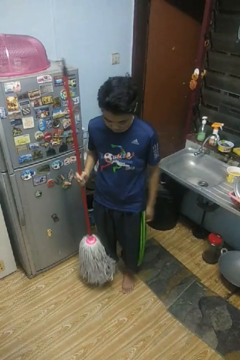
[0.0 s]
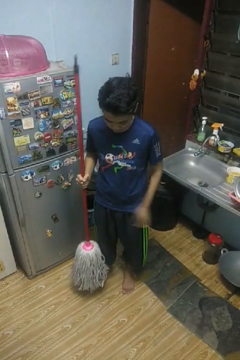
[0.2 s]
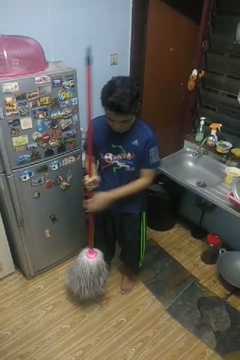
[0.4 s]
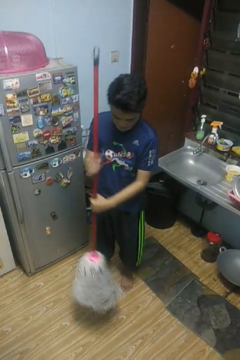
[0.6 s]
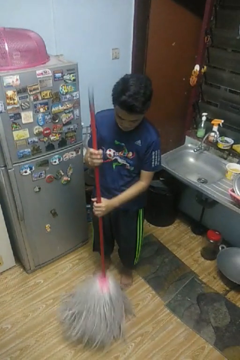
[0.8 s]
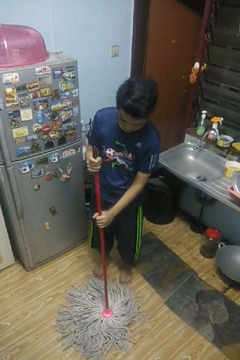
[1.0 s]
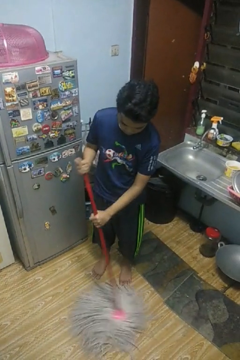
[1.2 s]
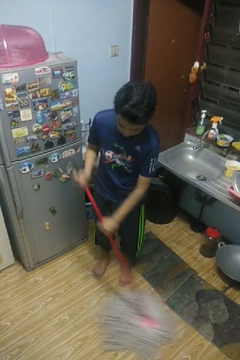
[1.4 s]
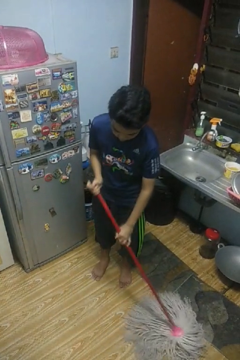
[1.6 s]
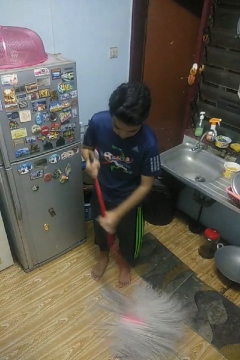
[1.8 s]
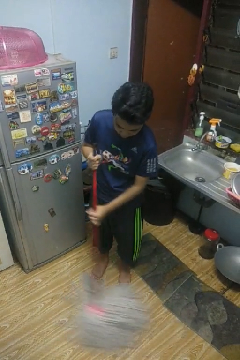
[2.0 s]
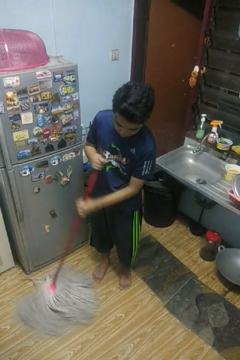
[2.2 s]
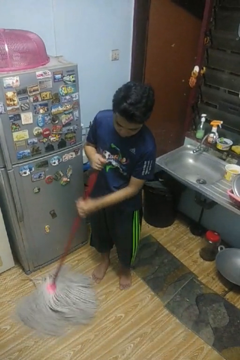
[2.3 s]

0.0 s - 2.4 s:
person mops

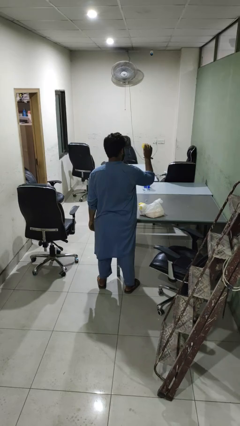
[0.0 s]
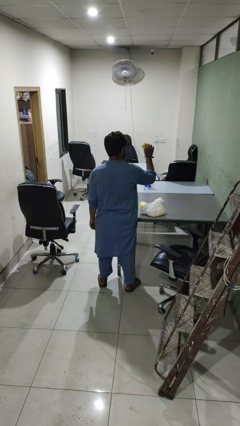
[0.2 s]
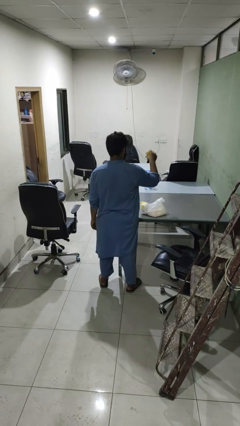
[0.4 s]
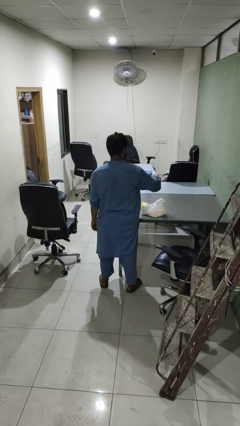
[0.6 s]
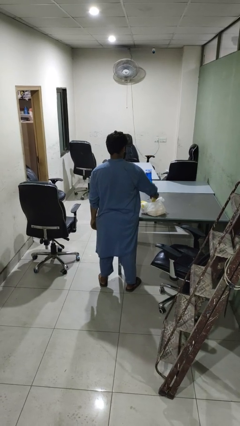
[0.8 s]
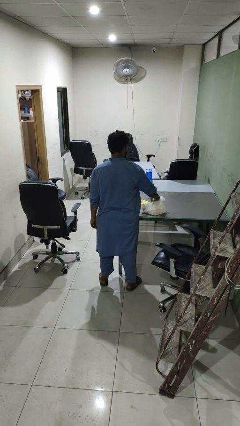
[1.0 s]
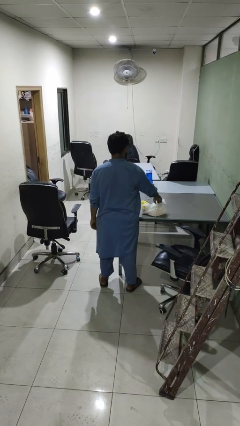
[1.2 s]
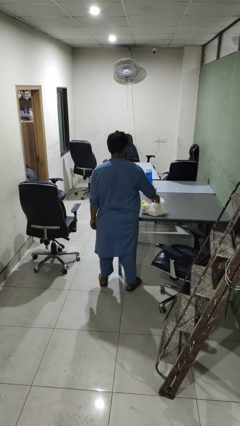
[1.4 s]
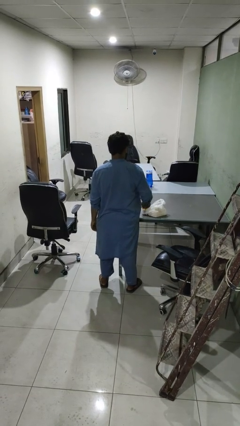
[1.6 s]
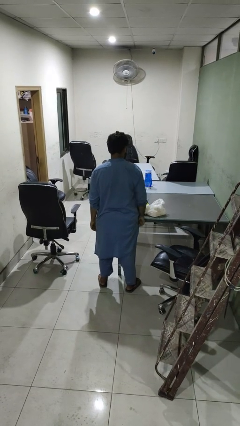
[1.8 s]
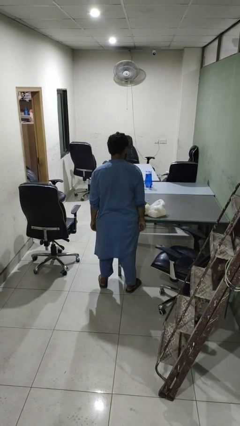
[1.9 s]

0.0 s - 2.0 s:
person puts object into bag

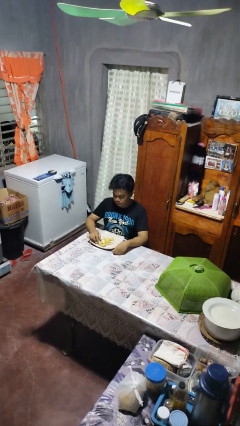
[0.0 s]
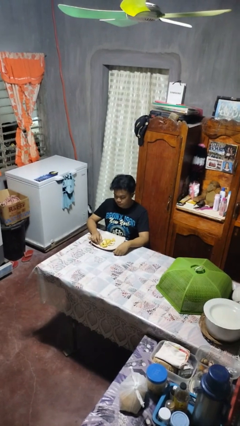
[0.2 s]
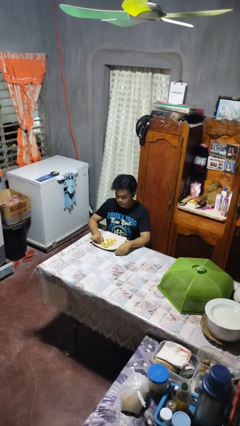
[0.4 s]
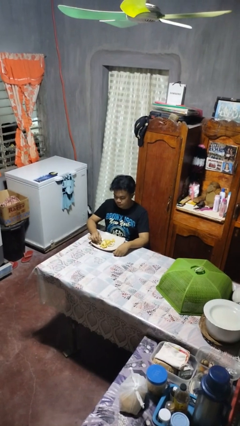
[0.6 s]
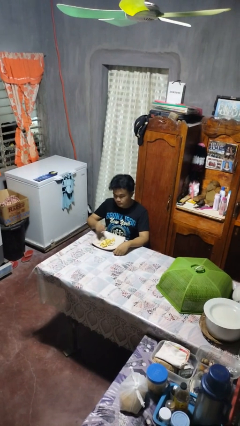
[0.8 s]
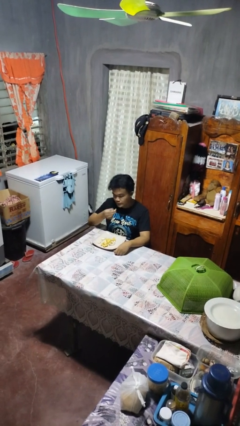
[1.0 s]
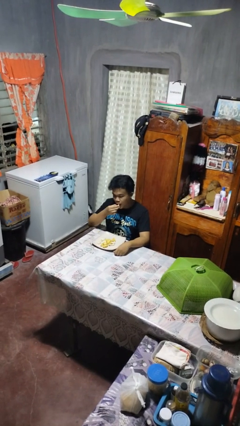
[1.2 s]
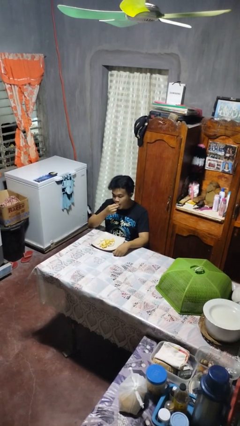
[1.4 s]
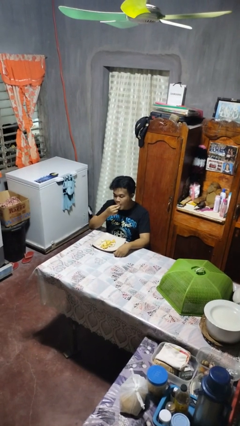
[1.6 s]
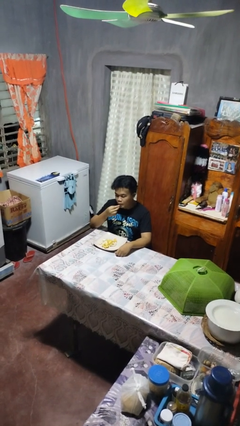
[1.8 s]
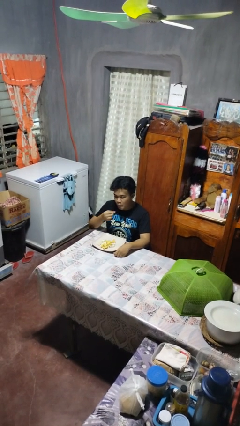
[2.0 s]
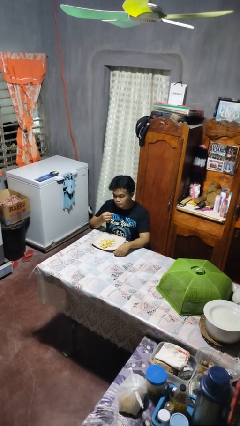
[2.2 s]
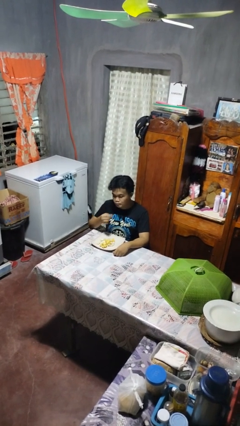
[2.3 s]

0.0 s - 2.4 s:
person eats with hands

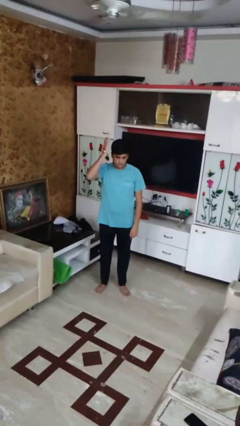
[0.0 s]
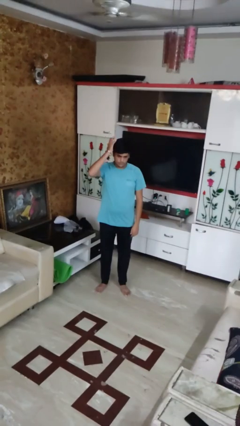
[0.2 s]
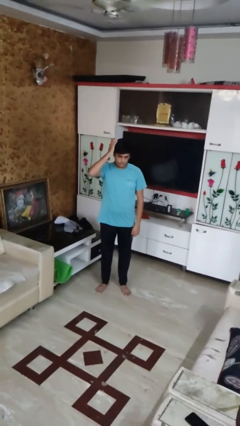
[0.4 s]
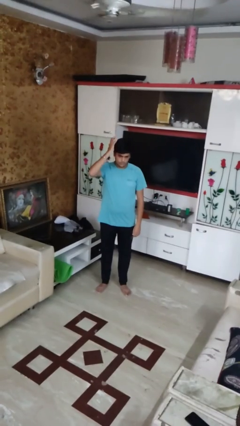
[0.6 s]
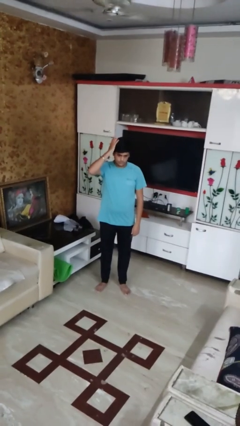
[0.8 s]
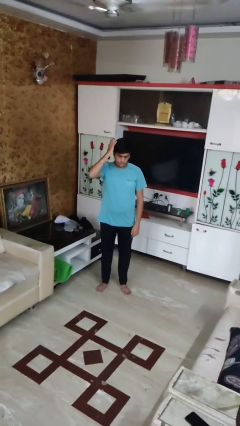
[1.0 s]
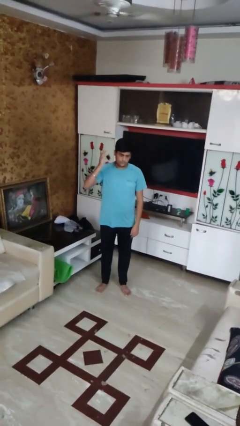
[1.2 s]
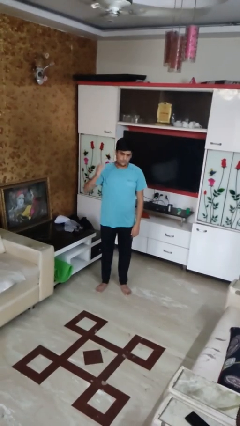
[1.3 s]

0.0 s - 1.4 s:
person pats head

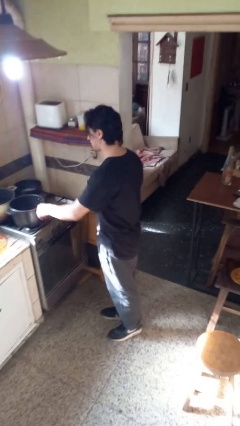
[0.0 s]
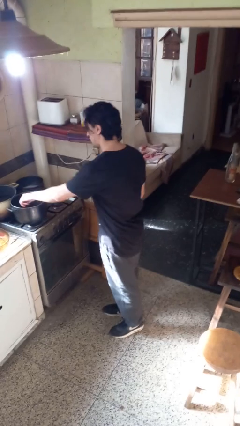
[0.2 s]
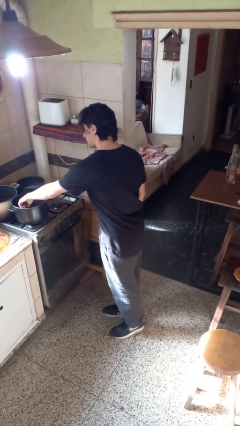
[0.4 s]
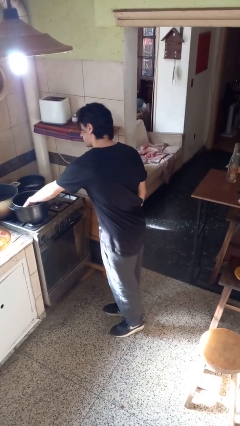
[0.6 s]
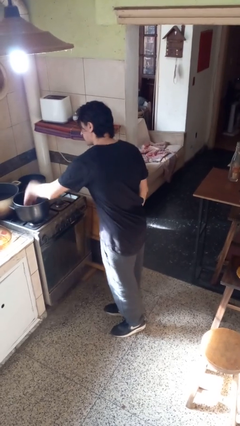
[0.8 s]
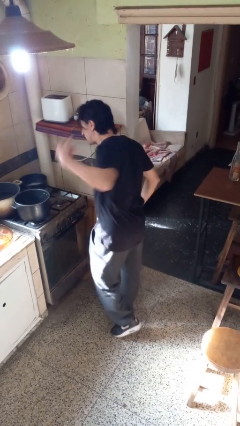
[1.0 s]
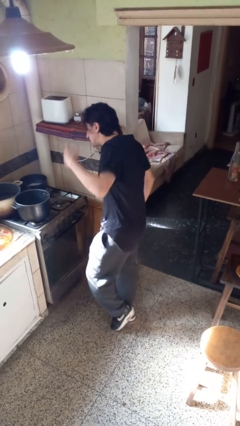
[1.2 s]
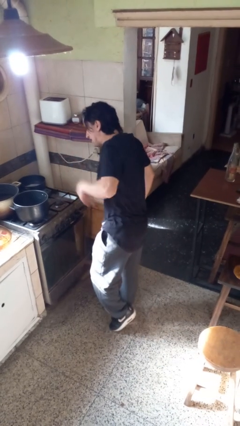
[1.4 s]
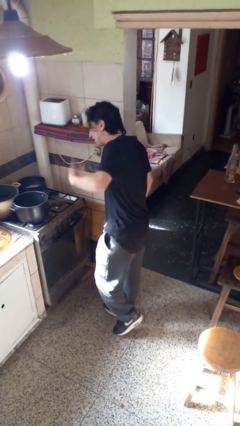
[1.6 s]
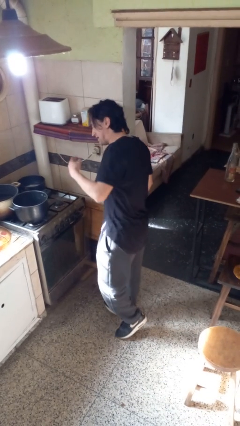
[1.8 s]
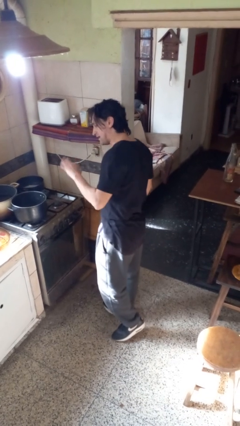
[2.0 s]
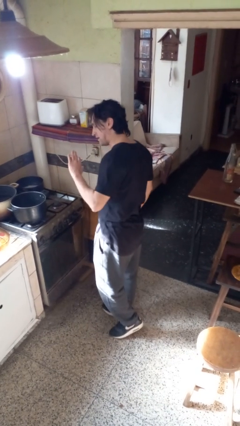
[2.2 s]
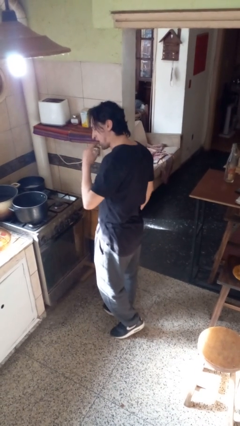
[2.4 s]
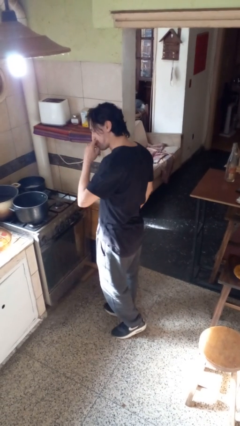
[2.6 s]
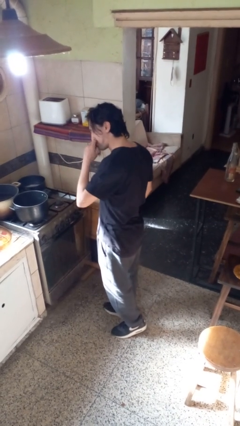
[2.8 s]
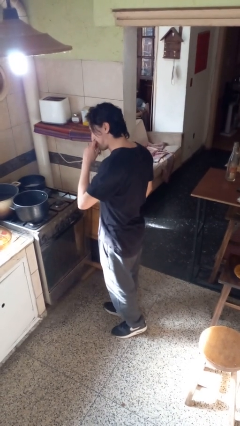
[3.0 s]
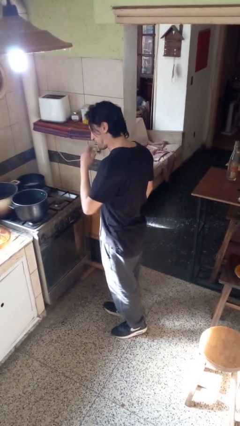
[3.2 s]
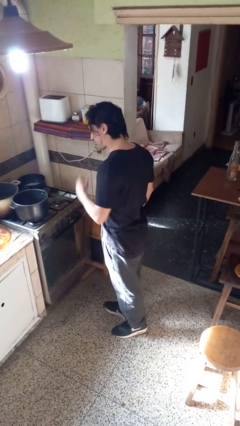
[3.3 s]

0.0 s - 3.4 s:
person burns hand

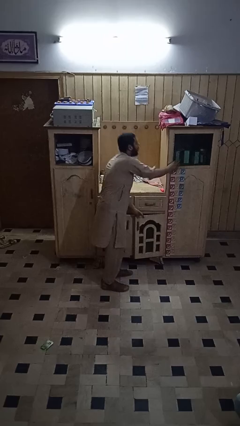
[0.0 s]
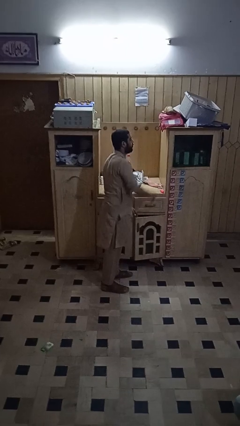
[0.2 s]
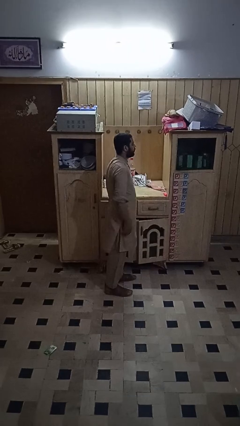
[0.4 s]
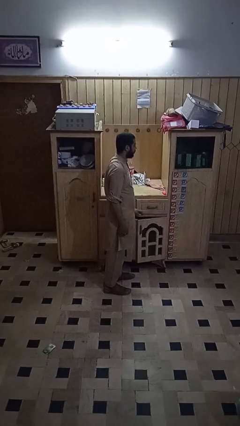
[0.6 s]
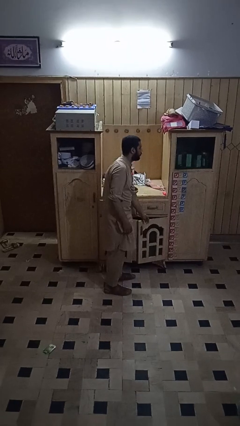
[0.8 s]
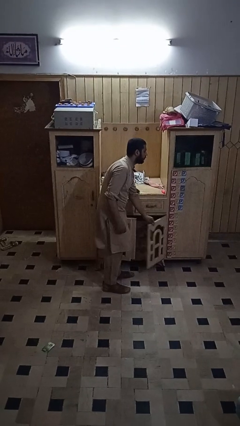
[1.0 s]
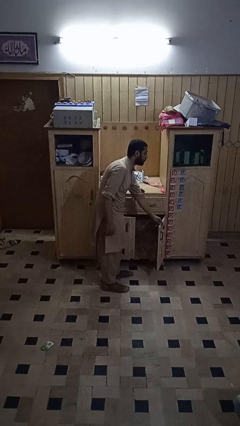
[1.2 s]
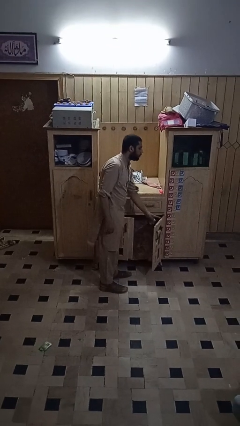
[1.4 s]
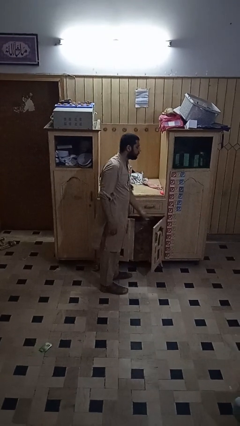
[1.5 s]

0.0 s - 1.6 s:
person closes cabinet

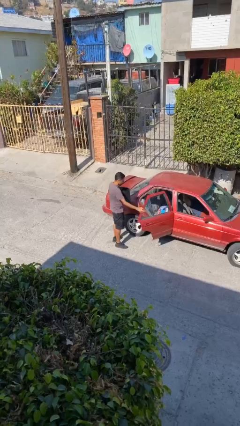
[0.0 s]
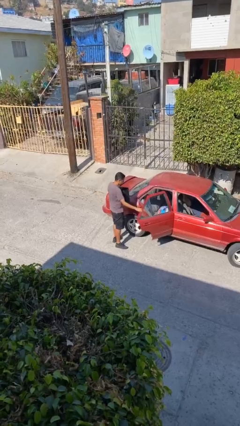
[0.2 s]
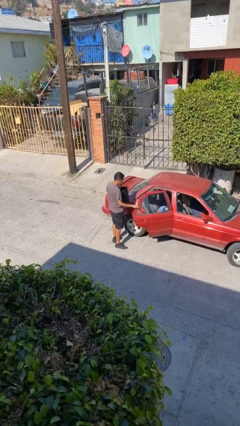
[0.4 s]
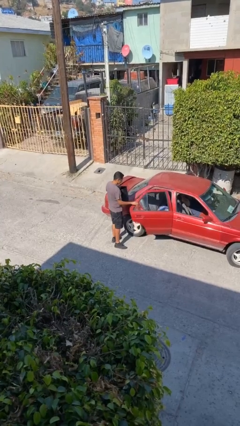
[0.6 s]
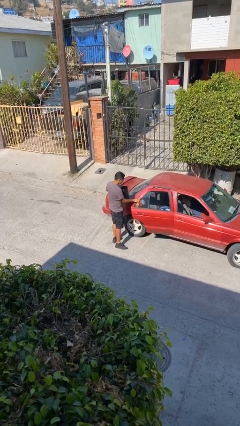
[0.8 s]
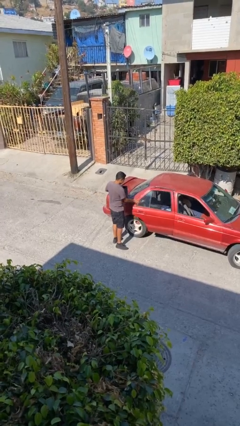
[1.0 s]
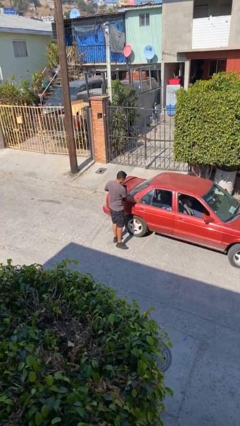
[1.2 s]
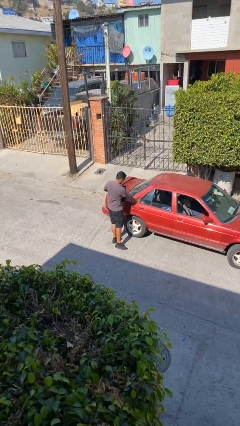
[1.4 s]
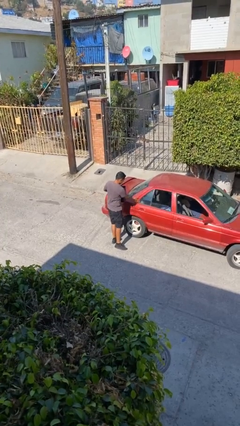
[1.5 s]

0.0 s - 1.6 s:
person closes car door

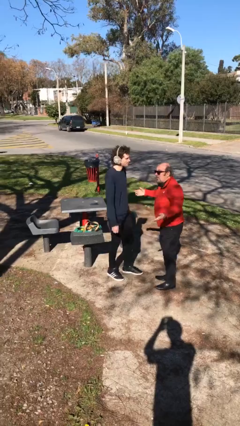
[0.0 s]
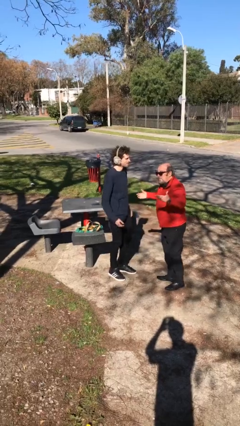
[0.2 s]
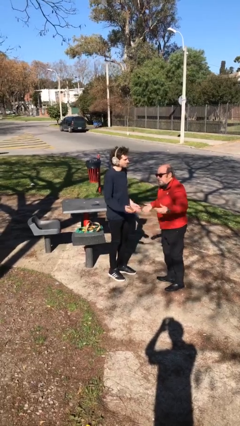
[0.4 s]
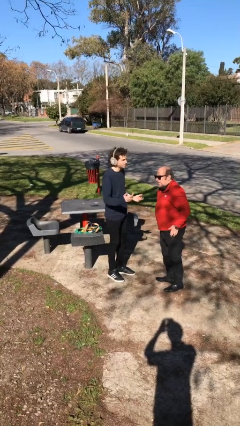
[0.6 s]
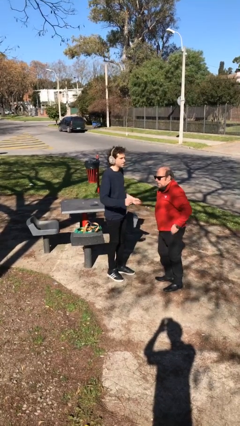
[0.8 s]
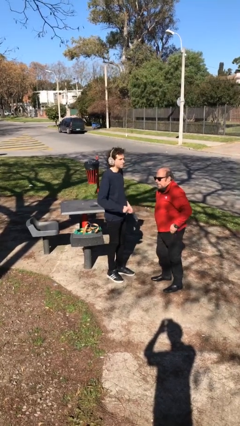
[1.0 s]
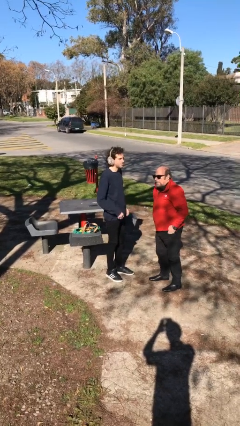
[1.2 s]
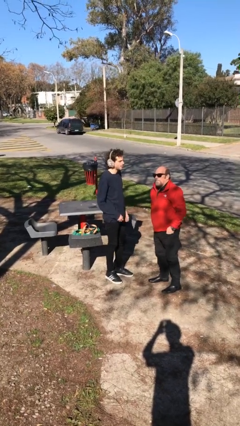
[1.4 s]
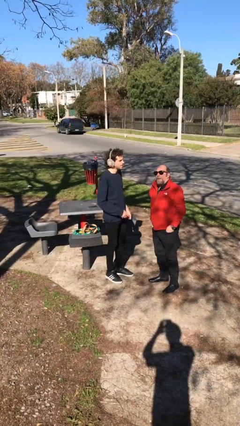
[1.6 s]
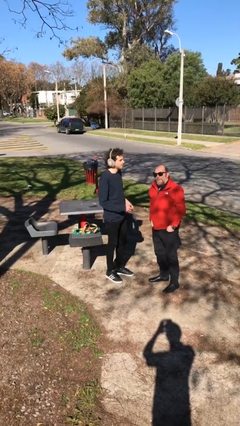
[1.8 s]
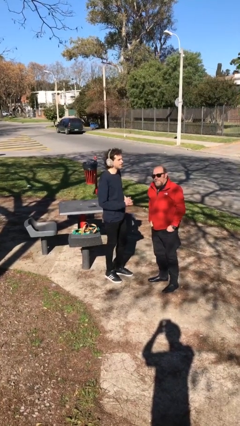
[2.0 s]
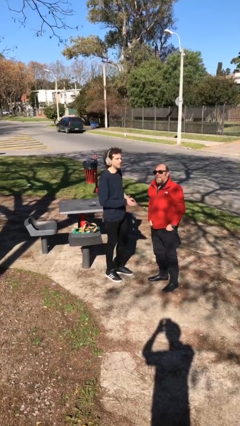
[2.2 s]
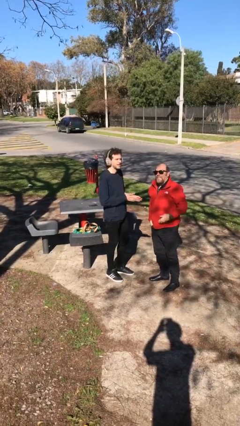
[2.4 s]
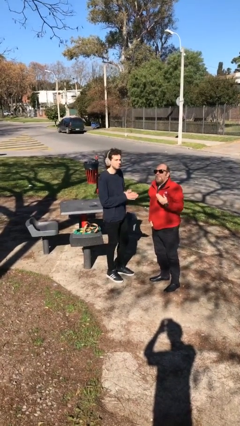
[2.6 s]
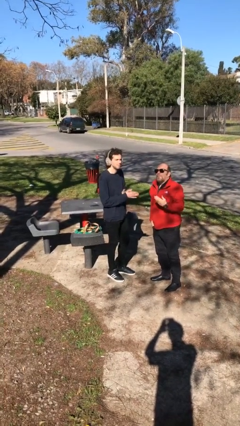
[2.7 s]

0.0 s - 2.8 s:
person talks to person
